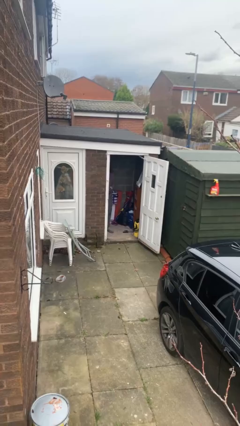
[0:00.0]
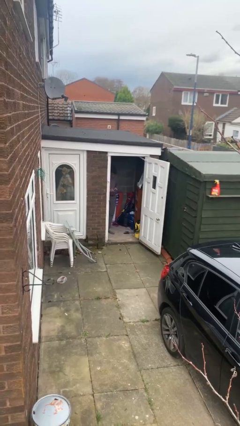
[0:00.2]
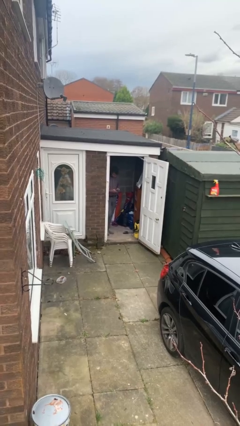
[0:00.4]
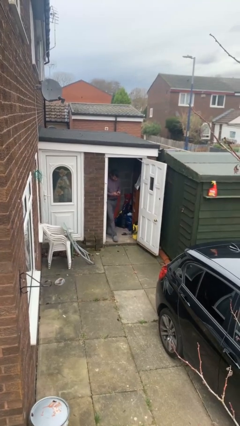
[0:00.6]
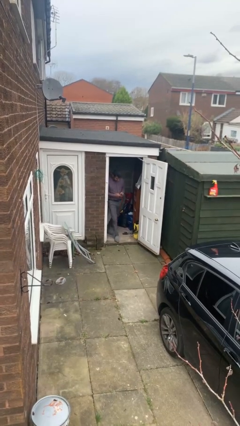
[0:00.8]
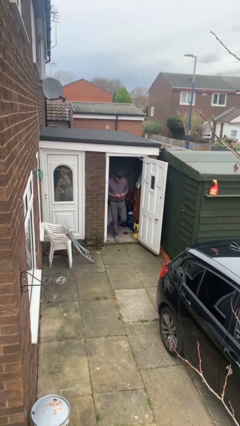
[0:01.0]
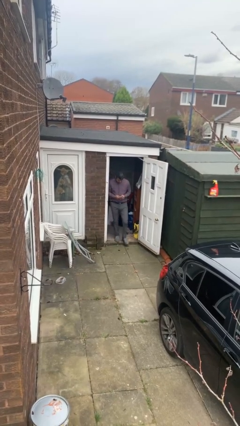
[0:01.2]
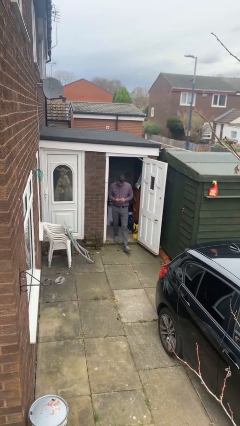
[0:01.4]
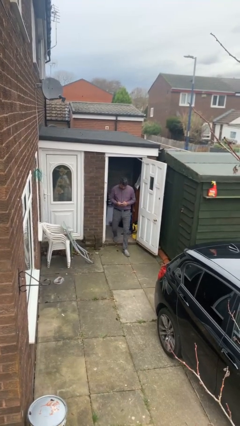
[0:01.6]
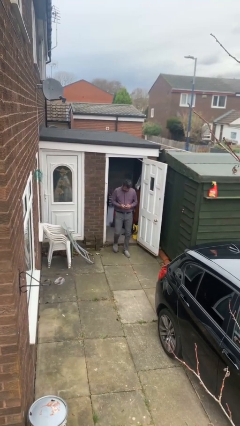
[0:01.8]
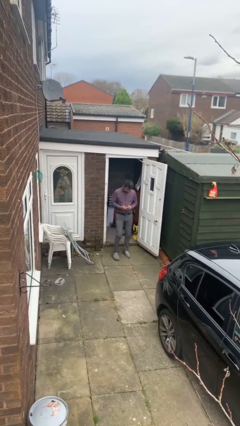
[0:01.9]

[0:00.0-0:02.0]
person enters scene through structure

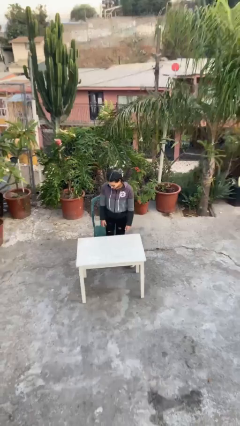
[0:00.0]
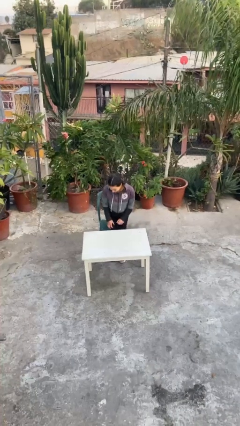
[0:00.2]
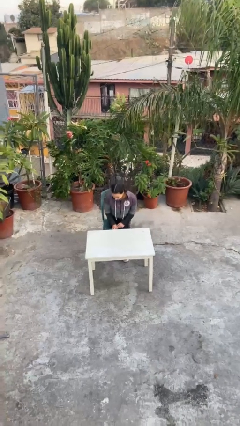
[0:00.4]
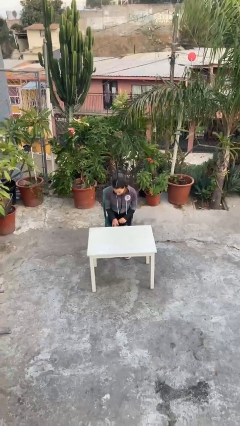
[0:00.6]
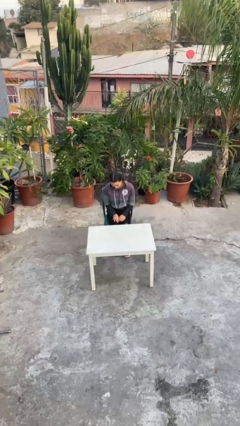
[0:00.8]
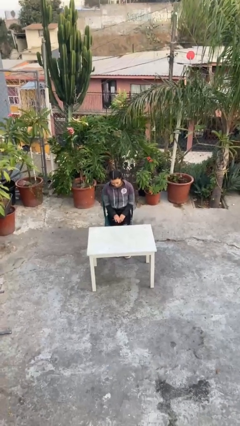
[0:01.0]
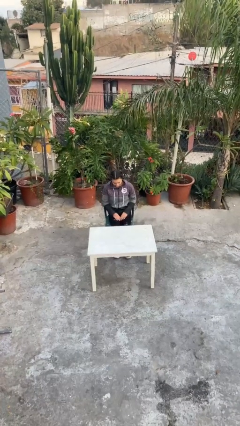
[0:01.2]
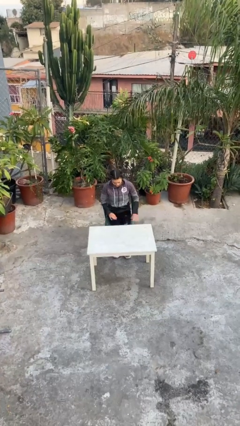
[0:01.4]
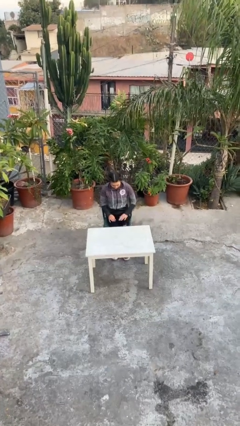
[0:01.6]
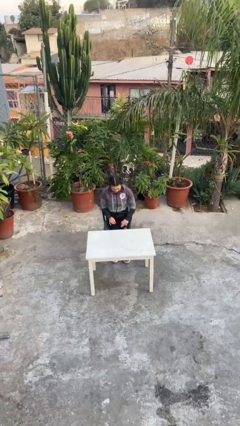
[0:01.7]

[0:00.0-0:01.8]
person sits down

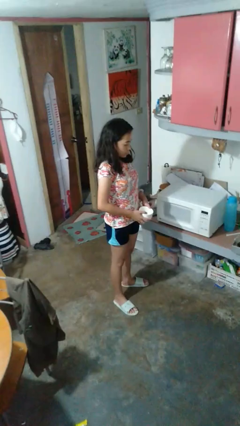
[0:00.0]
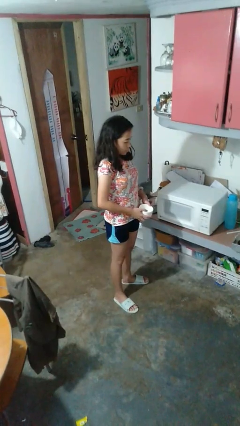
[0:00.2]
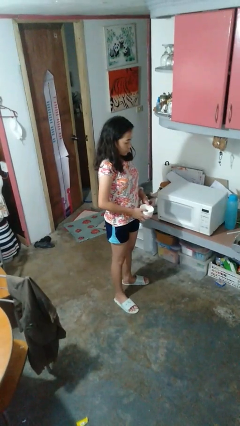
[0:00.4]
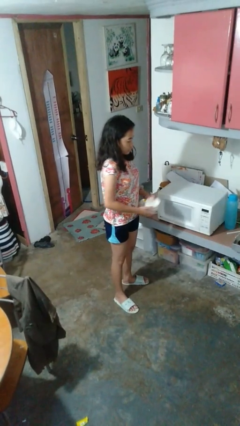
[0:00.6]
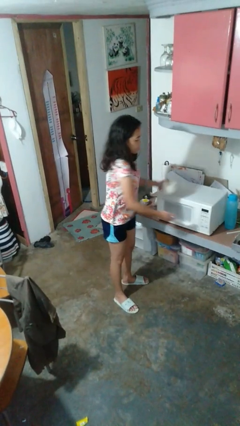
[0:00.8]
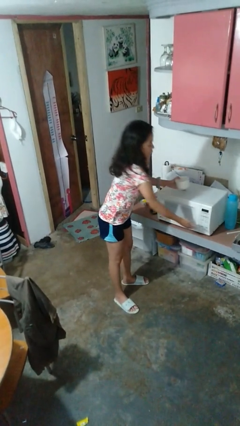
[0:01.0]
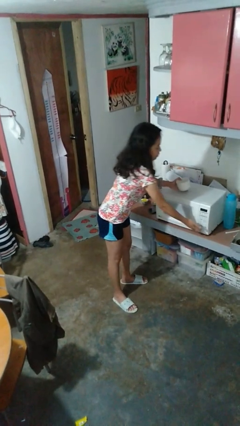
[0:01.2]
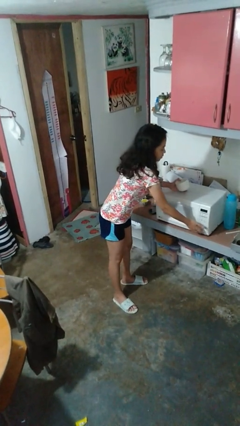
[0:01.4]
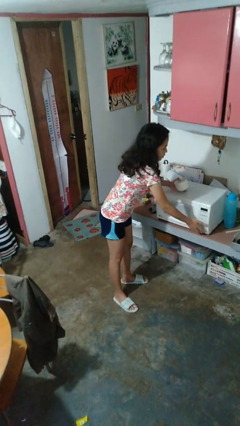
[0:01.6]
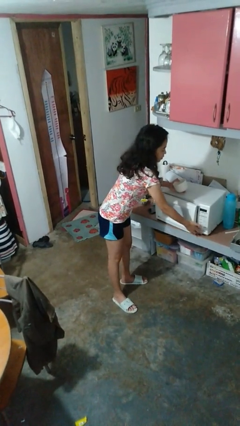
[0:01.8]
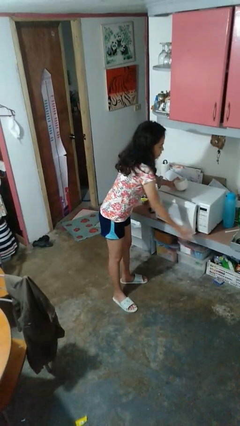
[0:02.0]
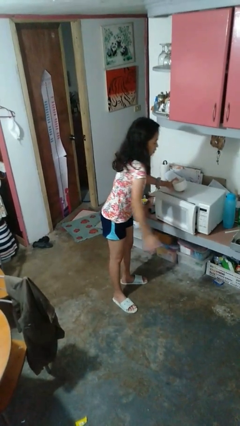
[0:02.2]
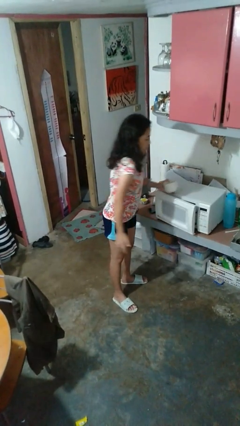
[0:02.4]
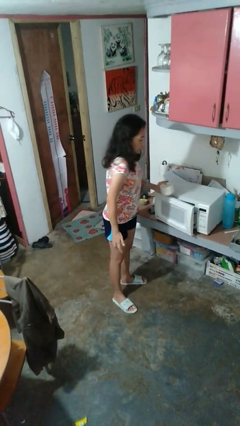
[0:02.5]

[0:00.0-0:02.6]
person opens microwave

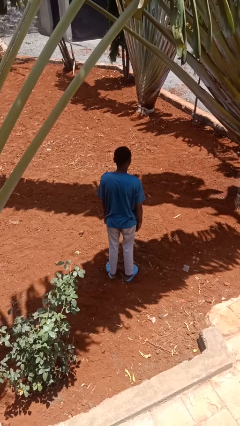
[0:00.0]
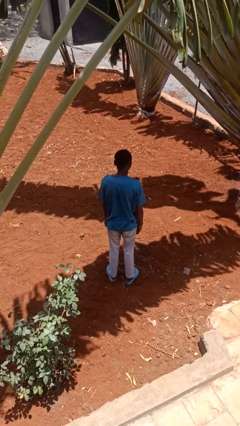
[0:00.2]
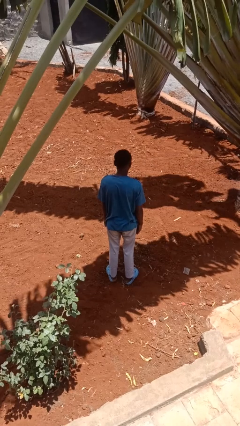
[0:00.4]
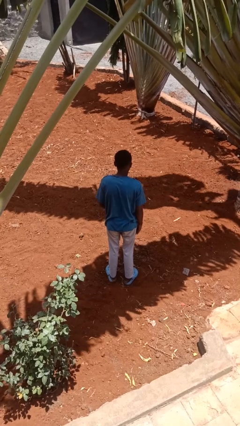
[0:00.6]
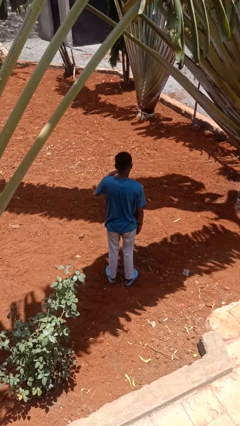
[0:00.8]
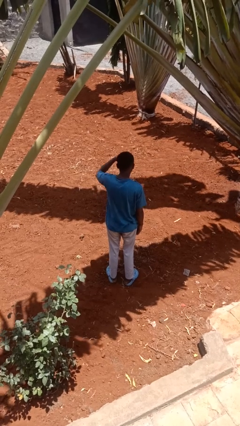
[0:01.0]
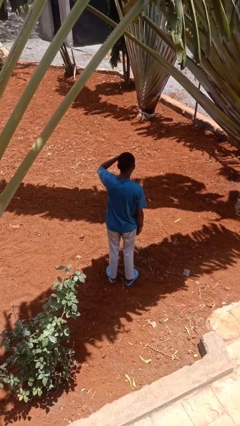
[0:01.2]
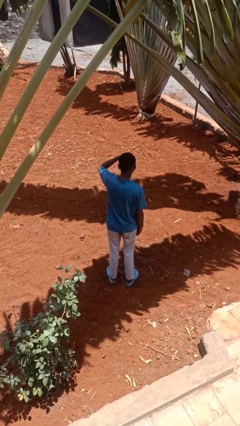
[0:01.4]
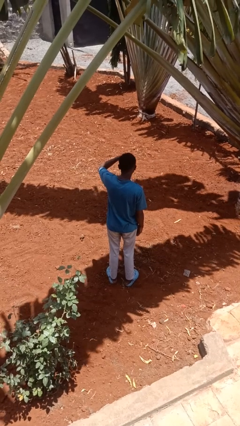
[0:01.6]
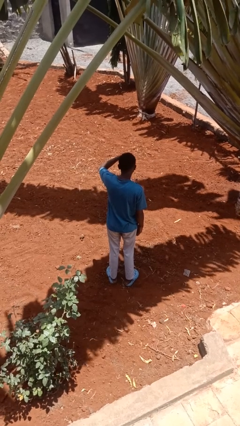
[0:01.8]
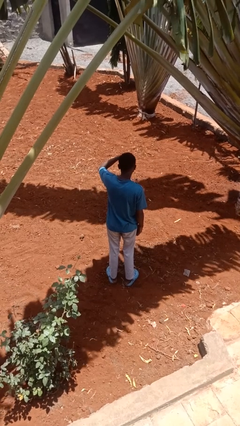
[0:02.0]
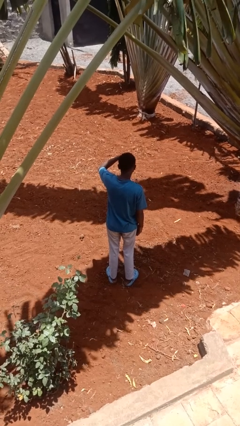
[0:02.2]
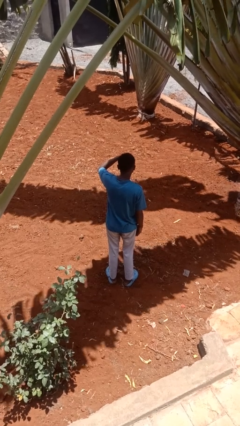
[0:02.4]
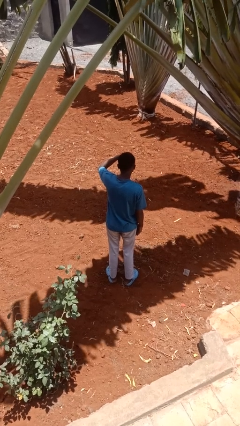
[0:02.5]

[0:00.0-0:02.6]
person shades eyes

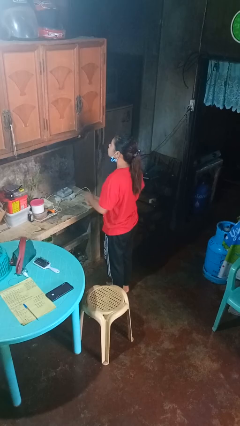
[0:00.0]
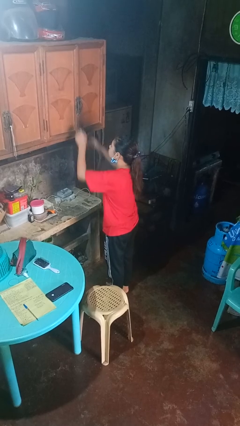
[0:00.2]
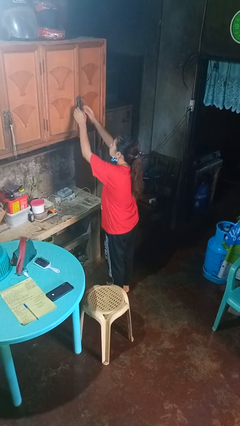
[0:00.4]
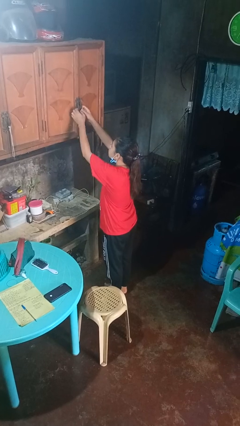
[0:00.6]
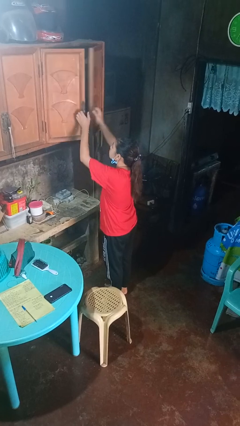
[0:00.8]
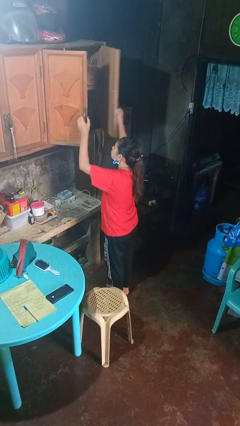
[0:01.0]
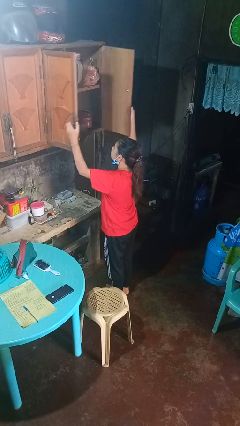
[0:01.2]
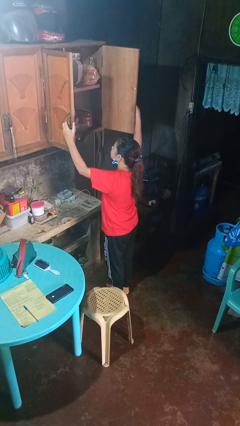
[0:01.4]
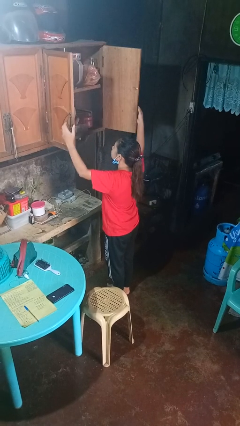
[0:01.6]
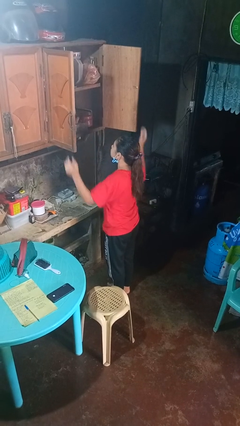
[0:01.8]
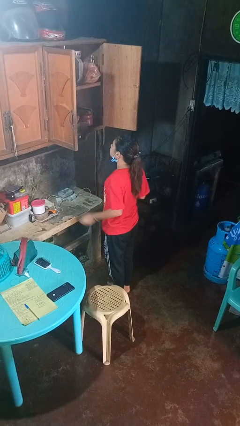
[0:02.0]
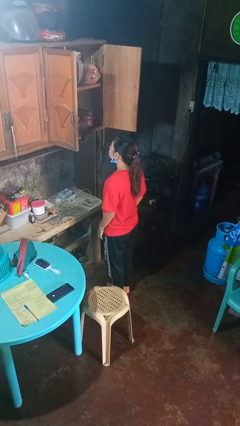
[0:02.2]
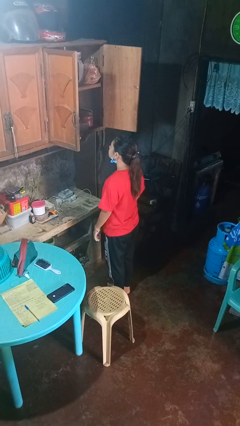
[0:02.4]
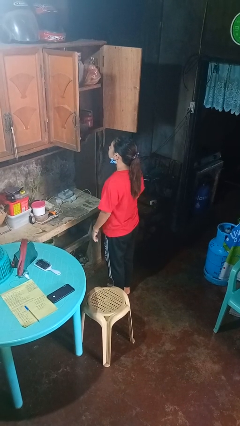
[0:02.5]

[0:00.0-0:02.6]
person opens cabinet

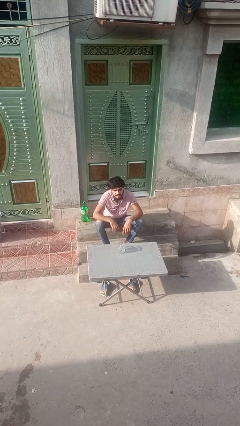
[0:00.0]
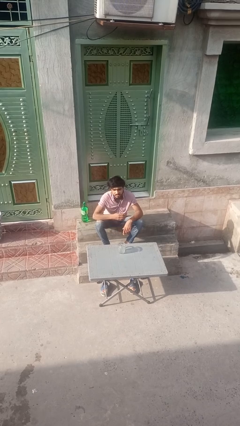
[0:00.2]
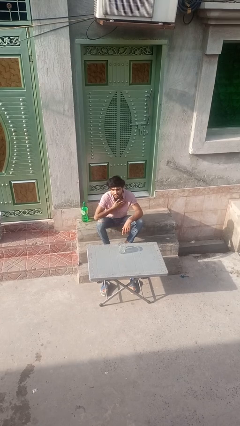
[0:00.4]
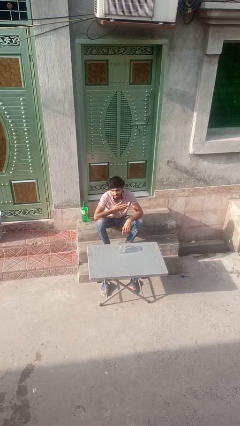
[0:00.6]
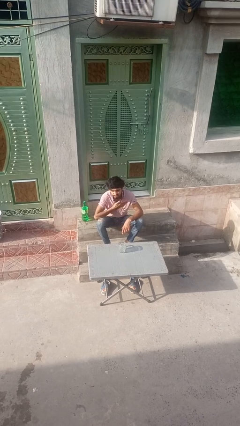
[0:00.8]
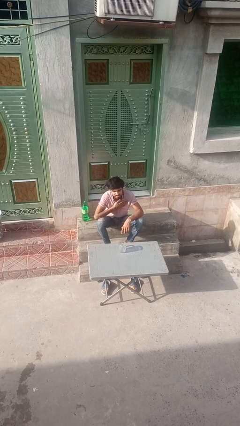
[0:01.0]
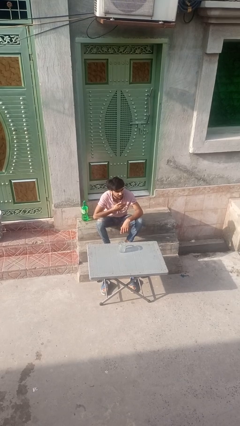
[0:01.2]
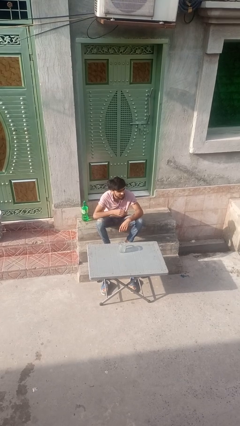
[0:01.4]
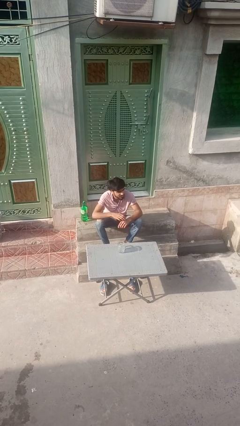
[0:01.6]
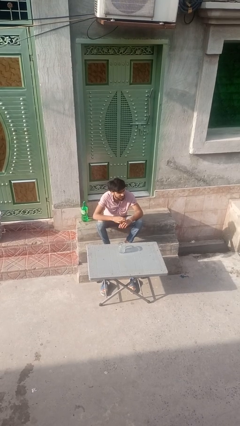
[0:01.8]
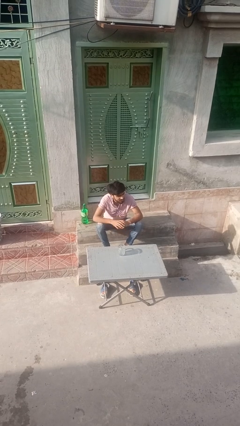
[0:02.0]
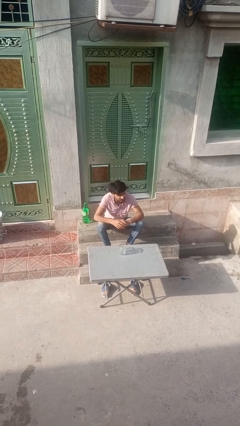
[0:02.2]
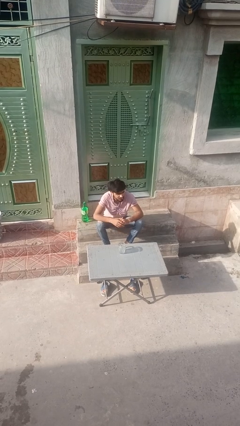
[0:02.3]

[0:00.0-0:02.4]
person drums on chest

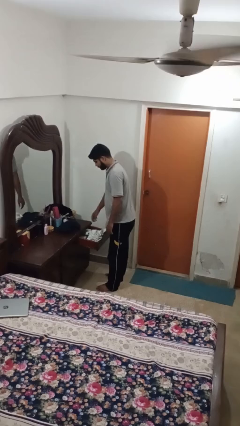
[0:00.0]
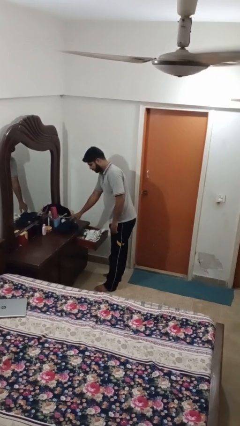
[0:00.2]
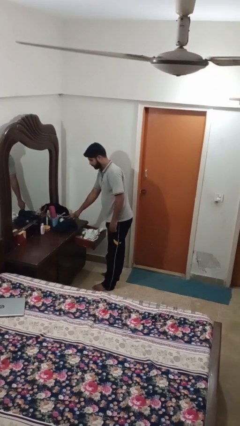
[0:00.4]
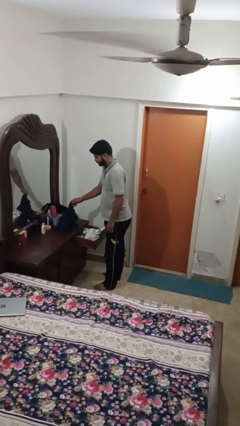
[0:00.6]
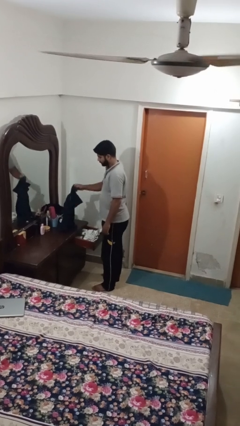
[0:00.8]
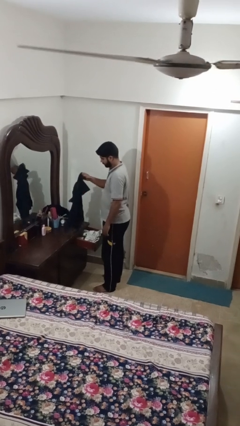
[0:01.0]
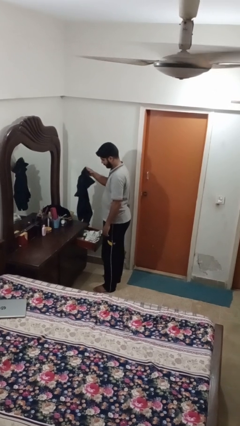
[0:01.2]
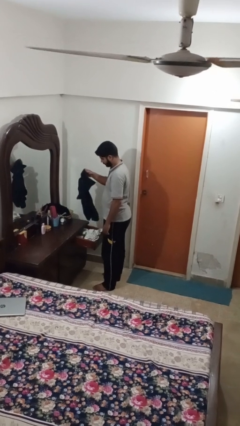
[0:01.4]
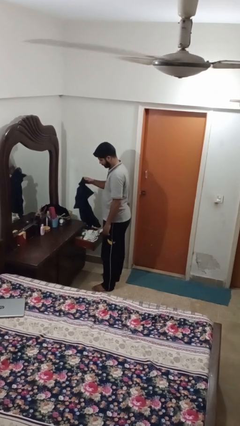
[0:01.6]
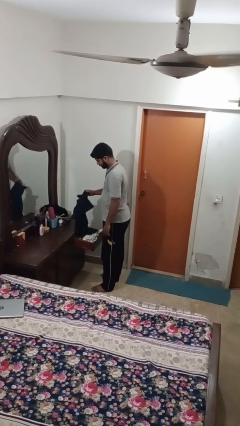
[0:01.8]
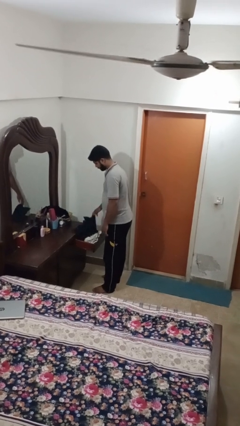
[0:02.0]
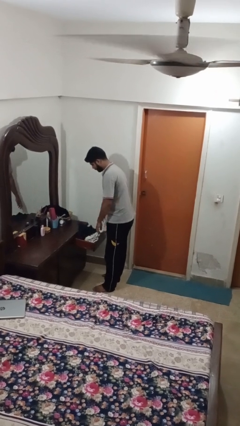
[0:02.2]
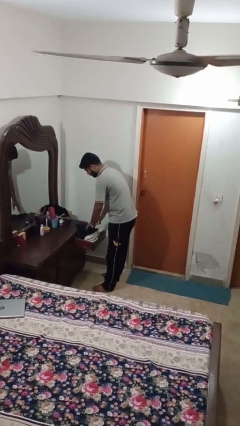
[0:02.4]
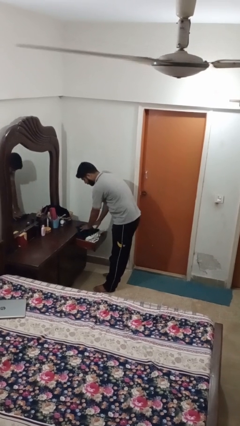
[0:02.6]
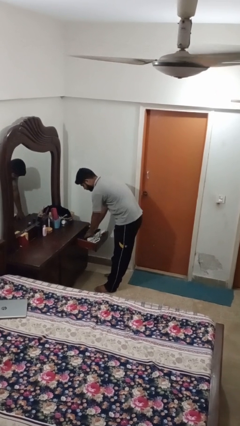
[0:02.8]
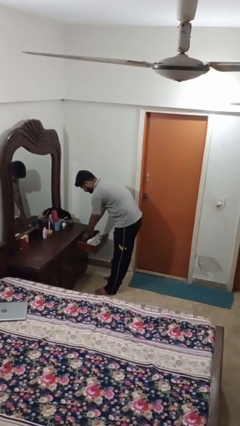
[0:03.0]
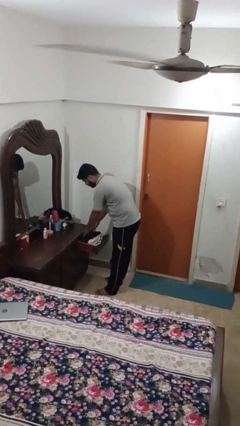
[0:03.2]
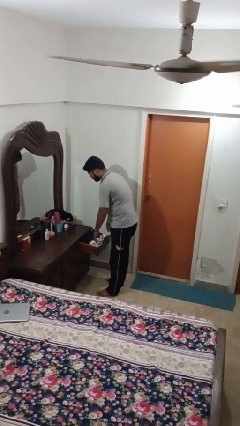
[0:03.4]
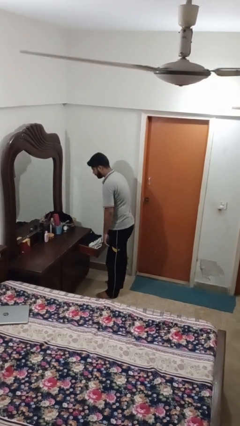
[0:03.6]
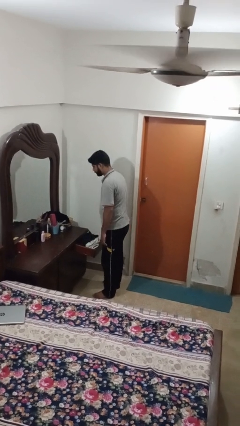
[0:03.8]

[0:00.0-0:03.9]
person puts clothes into dresser
